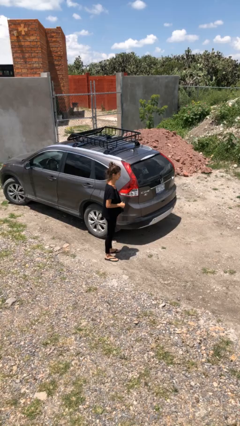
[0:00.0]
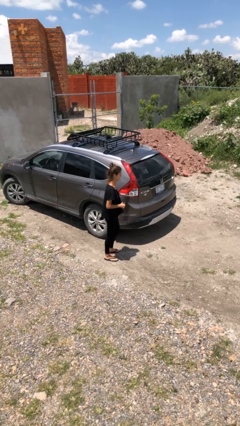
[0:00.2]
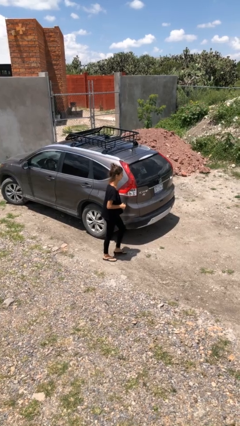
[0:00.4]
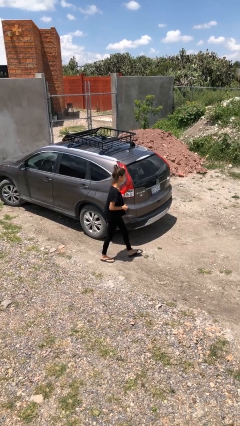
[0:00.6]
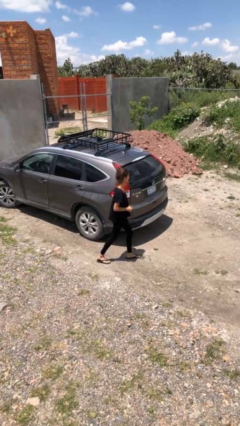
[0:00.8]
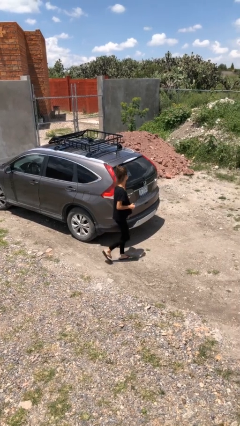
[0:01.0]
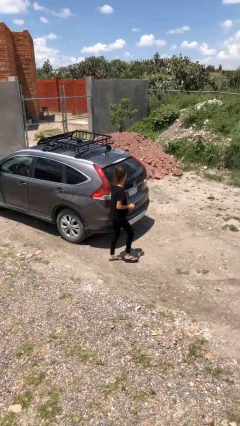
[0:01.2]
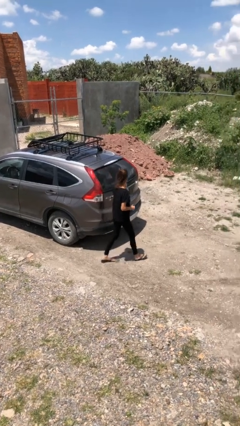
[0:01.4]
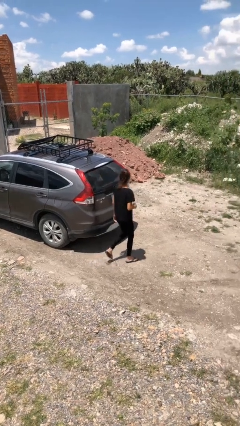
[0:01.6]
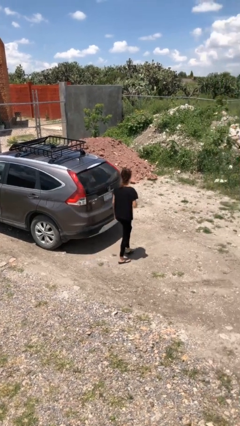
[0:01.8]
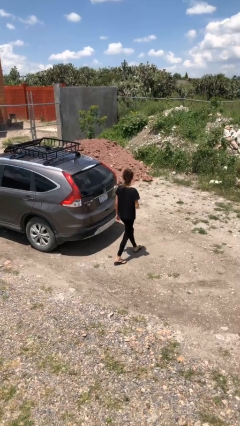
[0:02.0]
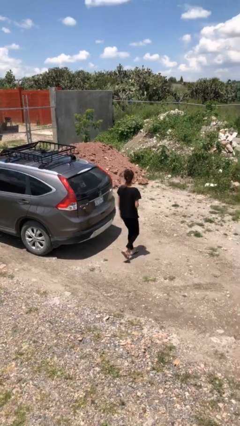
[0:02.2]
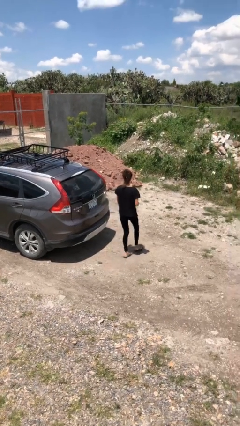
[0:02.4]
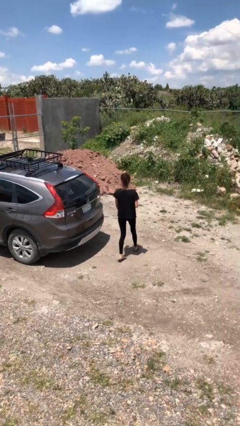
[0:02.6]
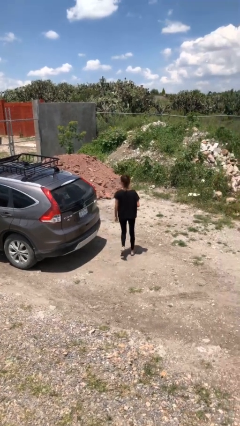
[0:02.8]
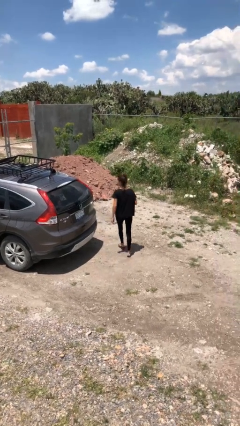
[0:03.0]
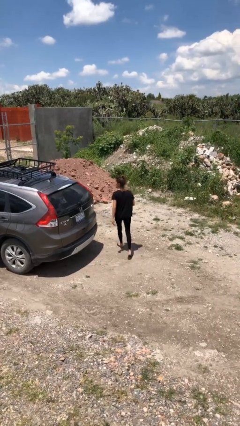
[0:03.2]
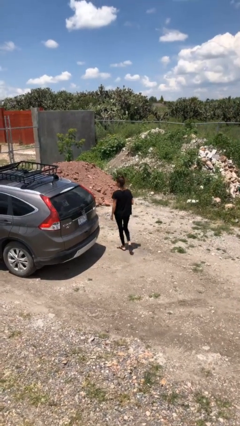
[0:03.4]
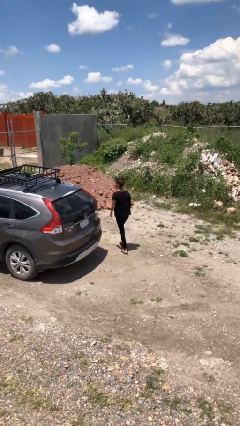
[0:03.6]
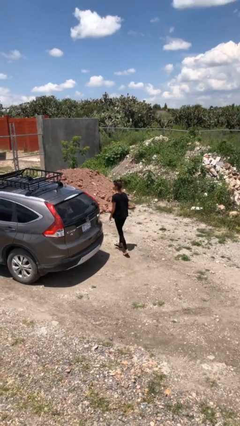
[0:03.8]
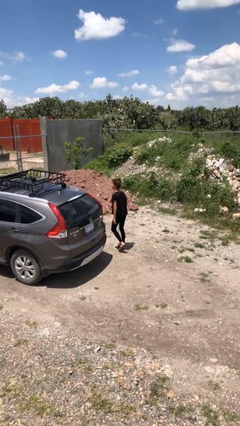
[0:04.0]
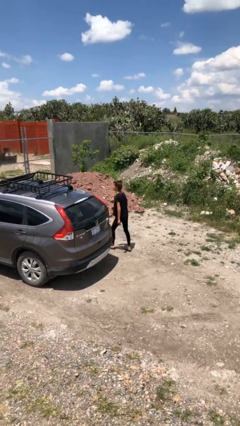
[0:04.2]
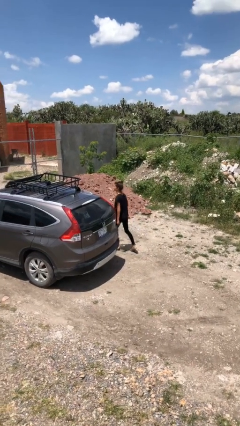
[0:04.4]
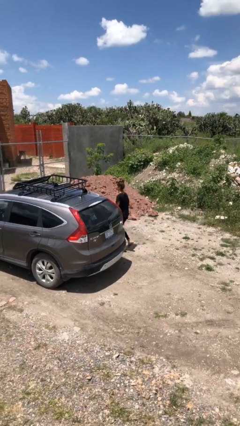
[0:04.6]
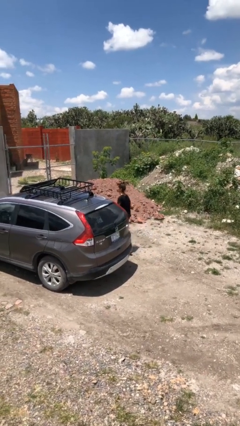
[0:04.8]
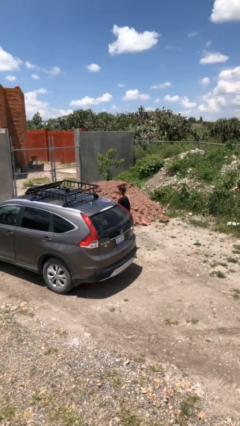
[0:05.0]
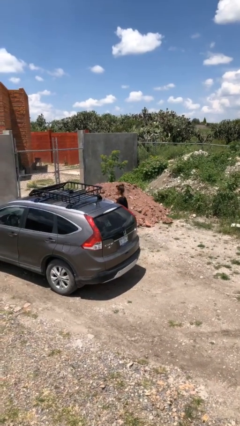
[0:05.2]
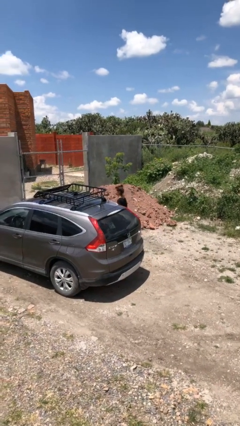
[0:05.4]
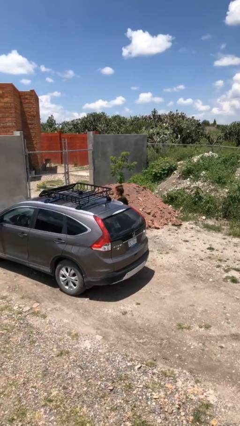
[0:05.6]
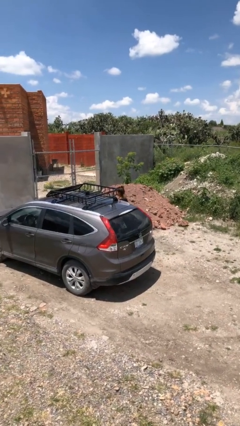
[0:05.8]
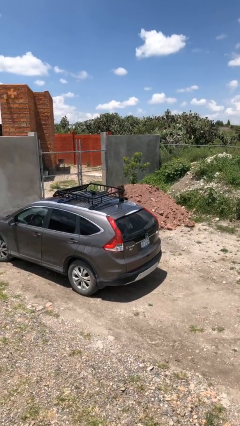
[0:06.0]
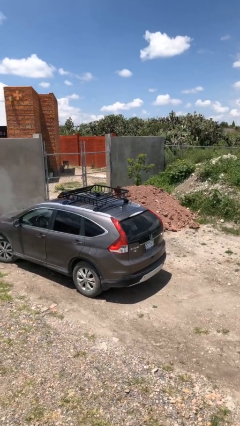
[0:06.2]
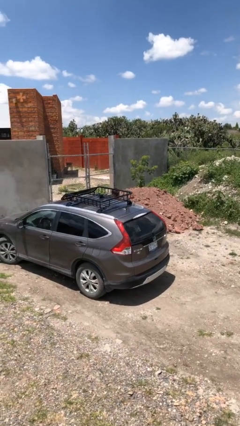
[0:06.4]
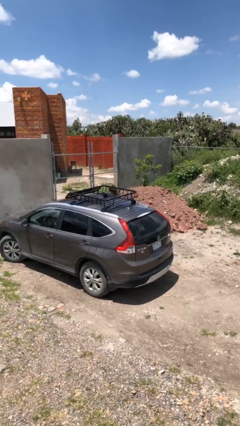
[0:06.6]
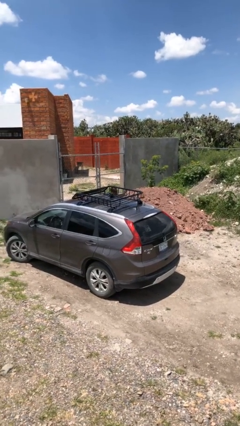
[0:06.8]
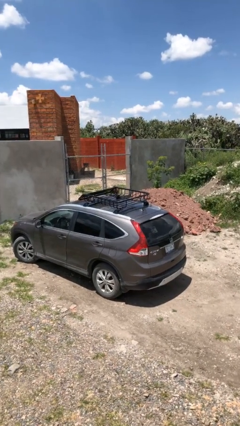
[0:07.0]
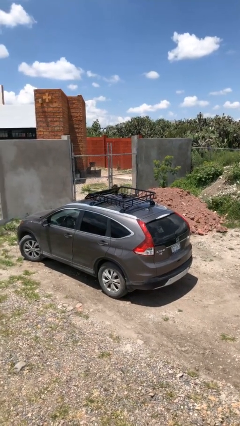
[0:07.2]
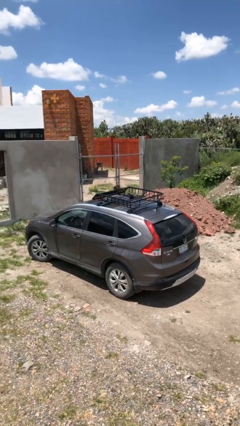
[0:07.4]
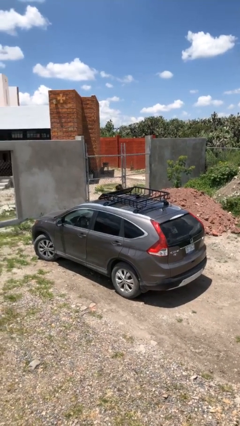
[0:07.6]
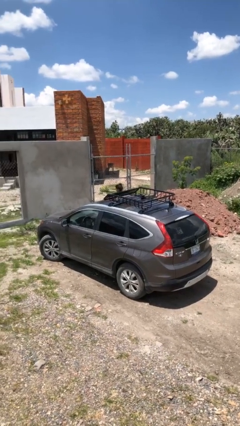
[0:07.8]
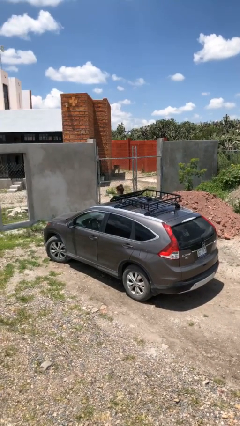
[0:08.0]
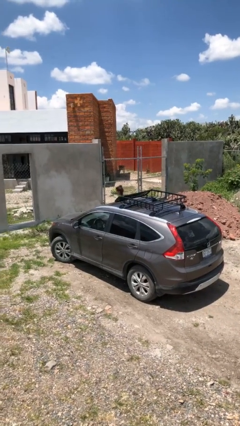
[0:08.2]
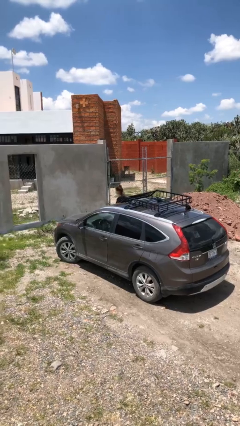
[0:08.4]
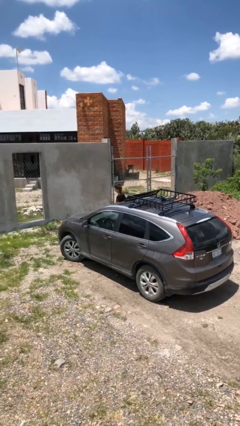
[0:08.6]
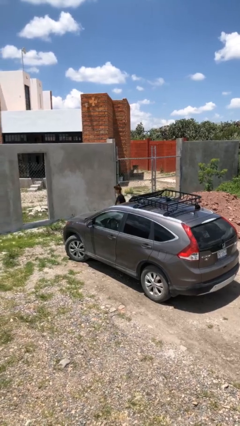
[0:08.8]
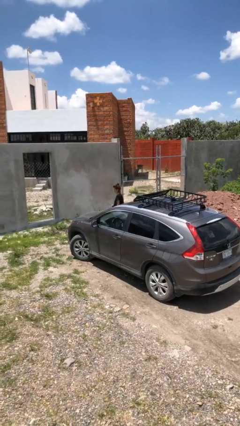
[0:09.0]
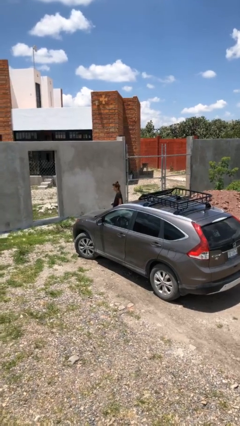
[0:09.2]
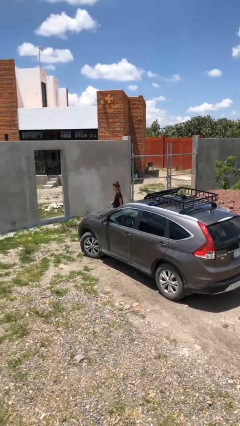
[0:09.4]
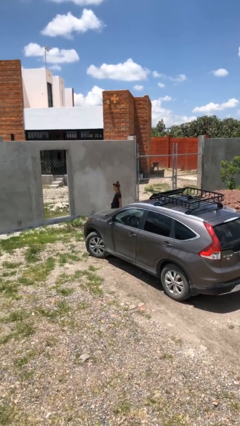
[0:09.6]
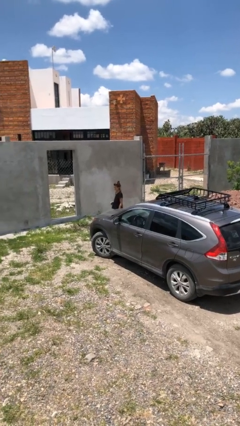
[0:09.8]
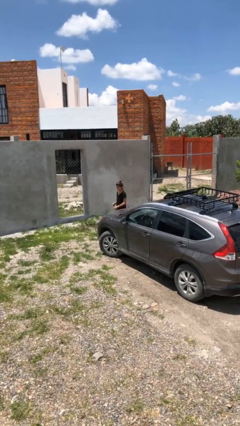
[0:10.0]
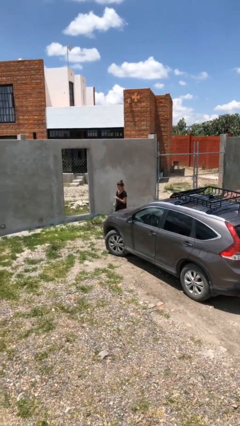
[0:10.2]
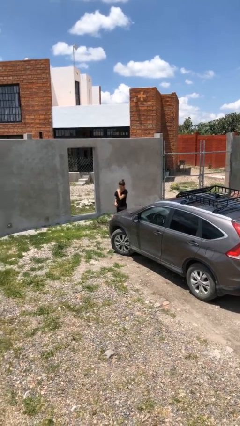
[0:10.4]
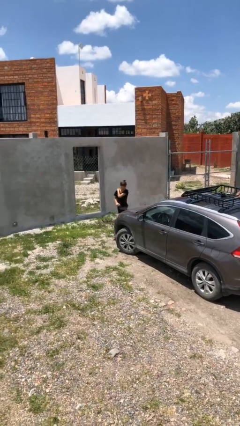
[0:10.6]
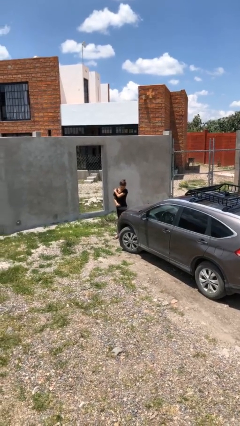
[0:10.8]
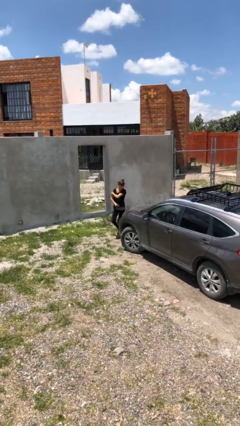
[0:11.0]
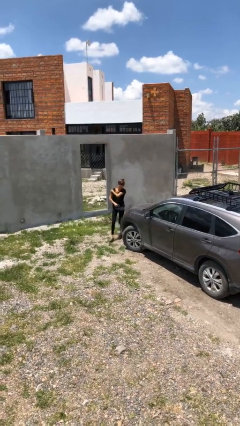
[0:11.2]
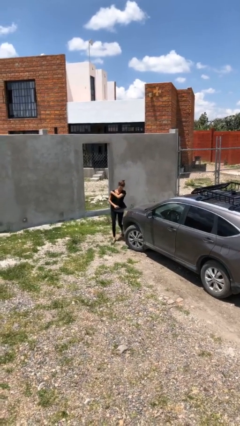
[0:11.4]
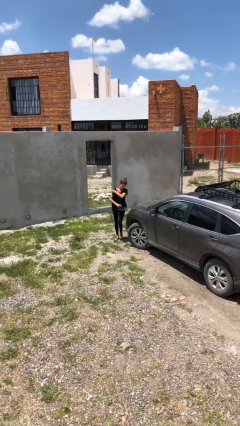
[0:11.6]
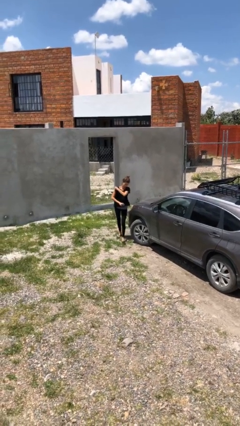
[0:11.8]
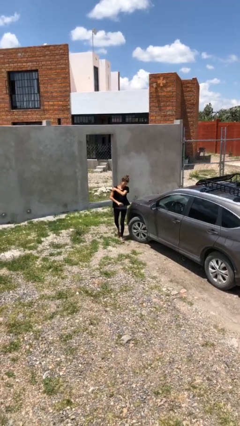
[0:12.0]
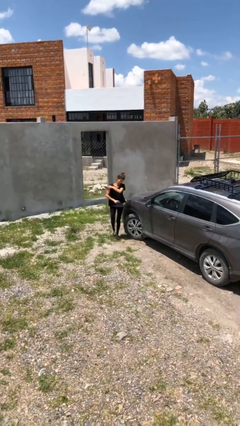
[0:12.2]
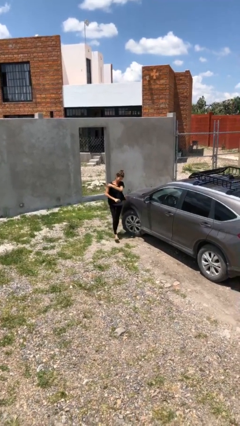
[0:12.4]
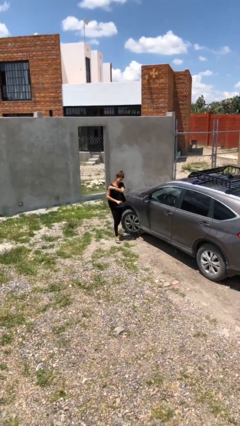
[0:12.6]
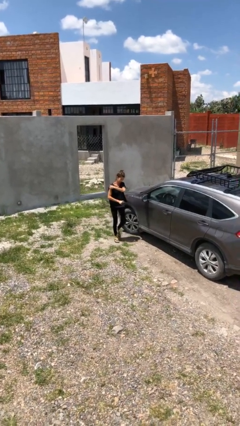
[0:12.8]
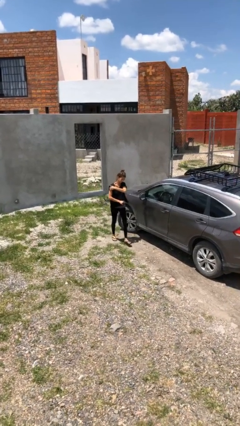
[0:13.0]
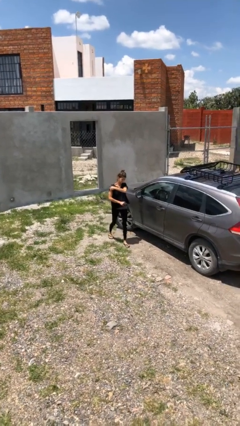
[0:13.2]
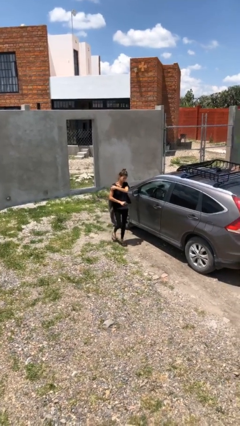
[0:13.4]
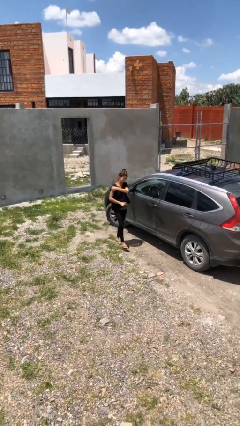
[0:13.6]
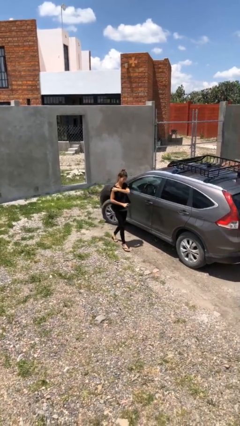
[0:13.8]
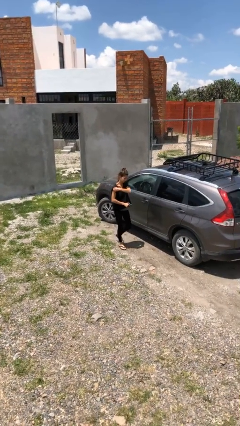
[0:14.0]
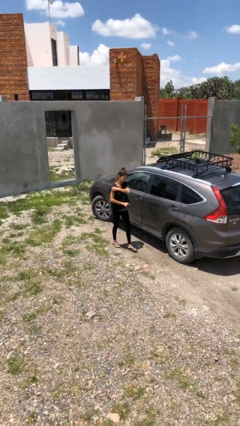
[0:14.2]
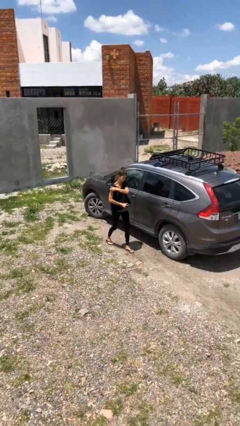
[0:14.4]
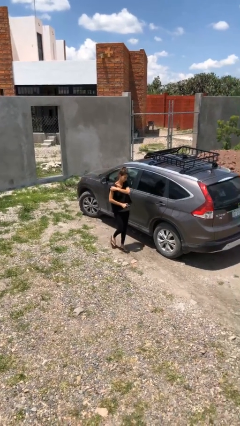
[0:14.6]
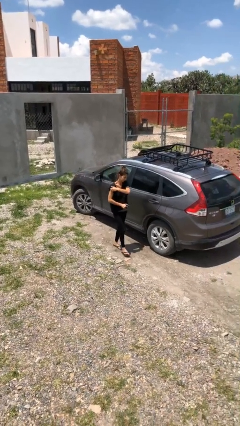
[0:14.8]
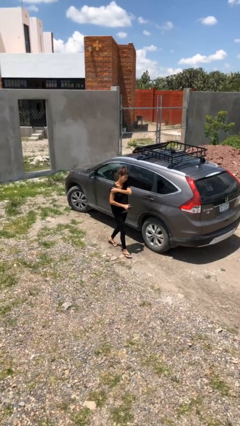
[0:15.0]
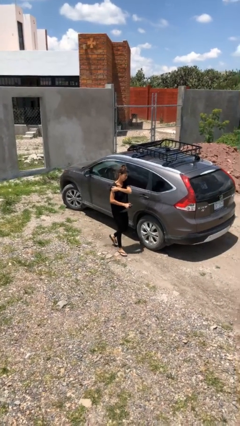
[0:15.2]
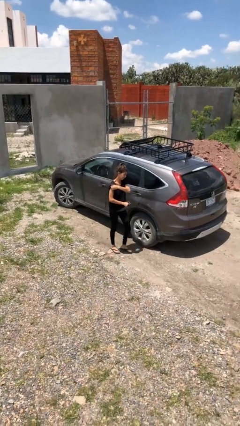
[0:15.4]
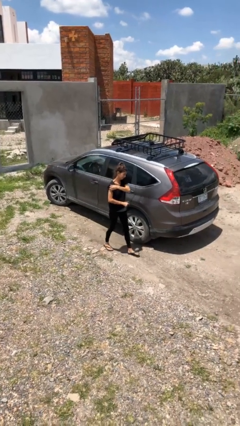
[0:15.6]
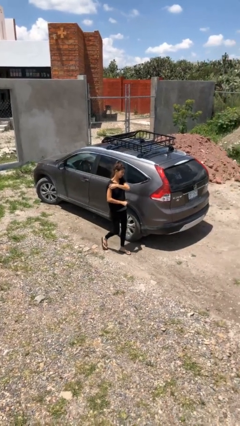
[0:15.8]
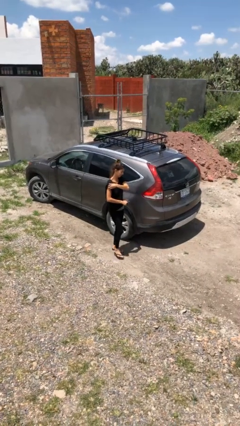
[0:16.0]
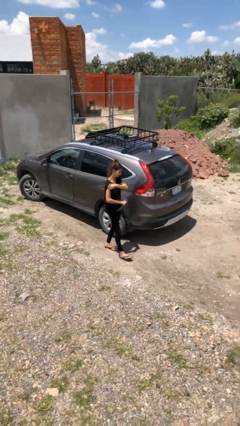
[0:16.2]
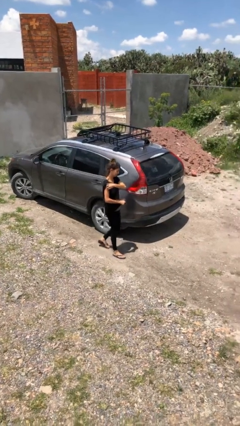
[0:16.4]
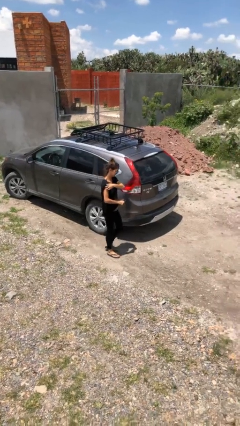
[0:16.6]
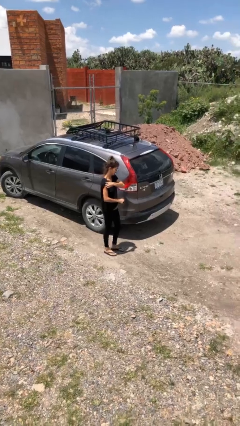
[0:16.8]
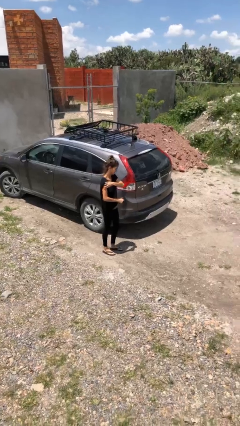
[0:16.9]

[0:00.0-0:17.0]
person walks around car

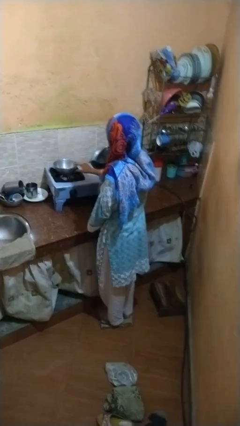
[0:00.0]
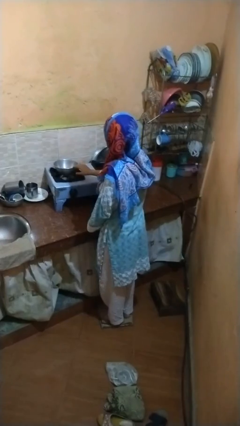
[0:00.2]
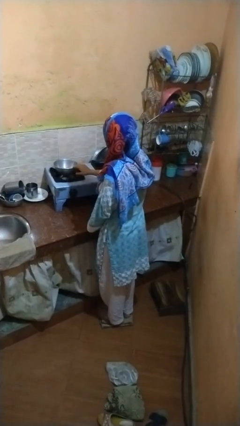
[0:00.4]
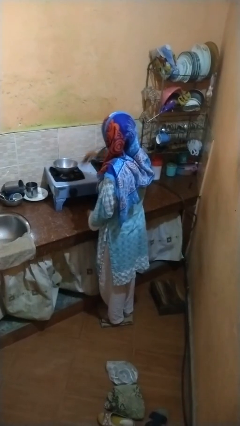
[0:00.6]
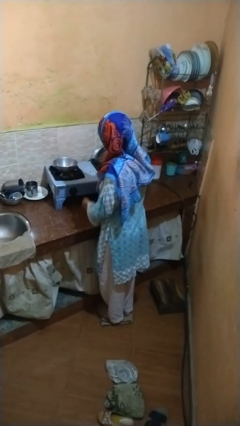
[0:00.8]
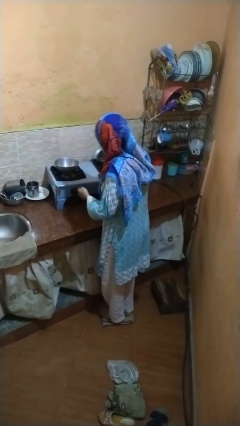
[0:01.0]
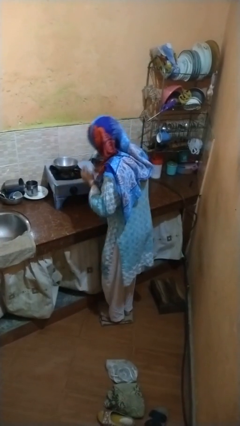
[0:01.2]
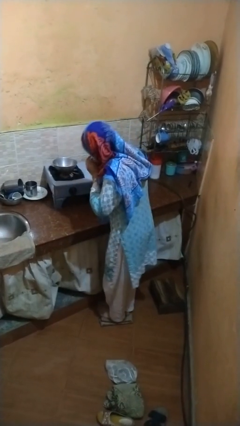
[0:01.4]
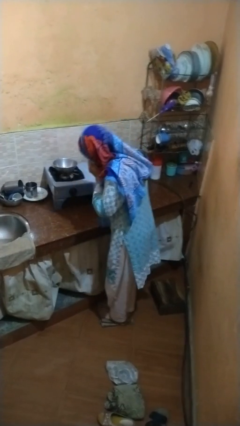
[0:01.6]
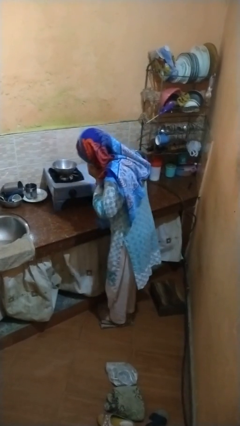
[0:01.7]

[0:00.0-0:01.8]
person burns hand
